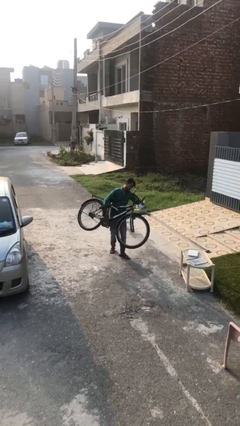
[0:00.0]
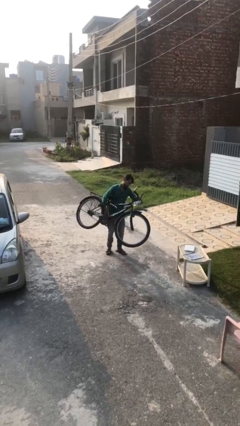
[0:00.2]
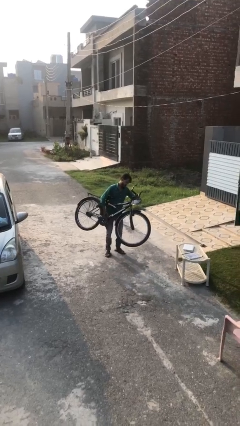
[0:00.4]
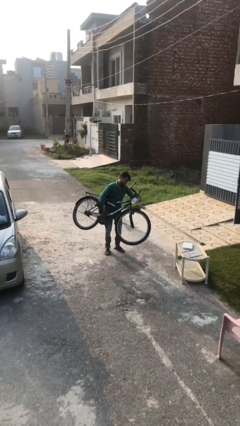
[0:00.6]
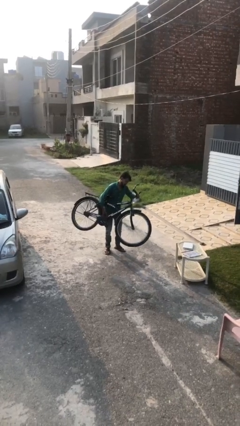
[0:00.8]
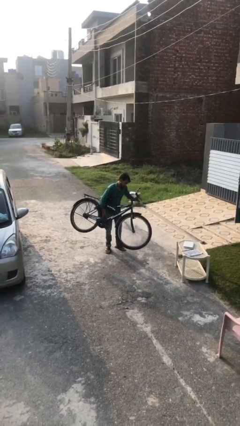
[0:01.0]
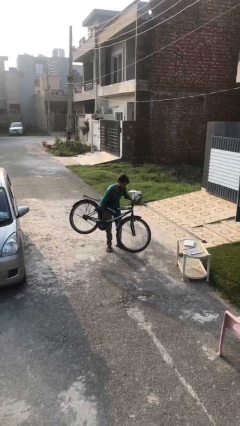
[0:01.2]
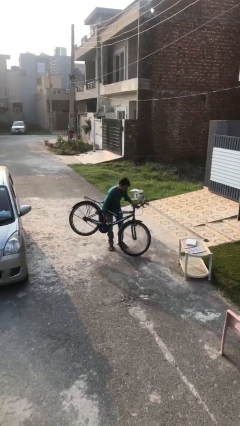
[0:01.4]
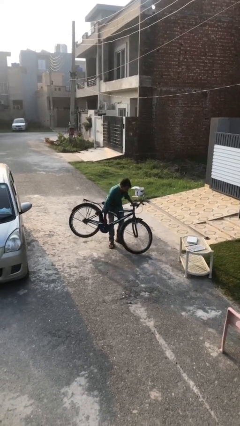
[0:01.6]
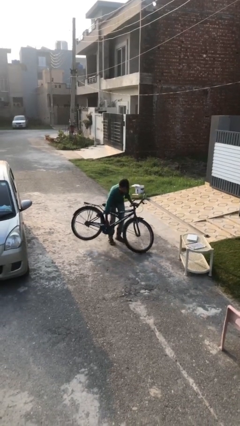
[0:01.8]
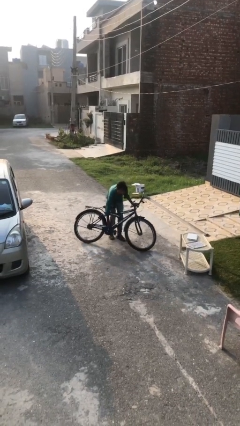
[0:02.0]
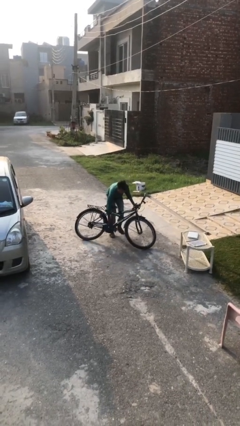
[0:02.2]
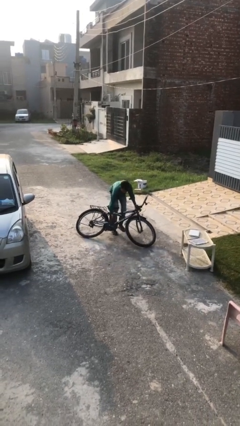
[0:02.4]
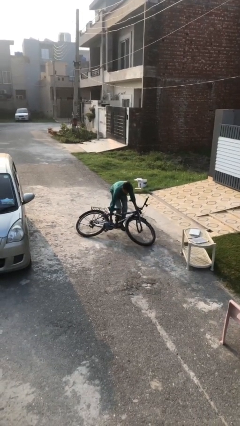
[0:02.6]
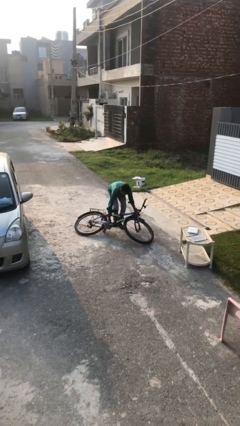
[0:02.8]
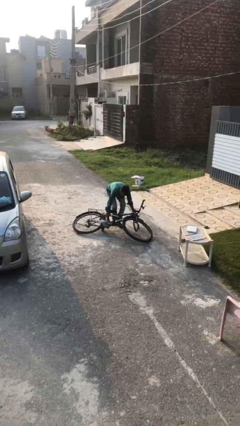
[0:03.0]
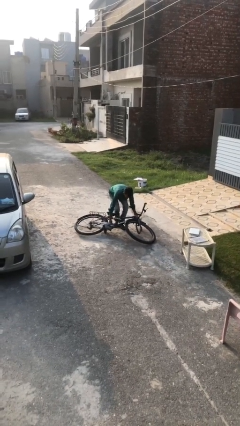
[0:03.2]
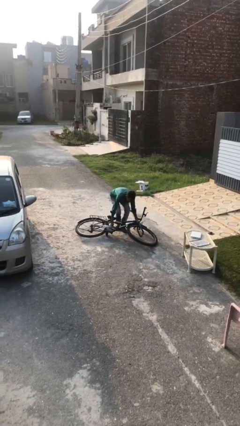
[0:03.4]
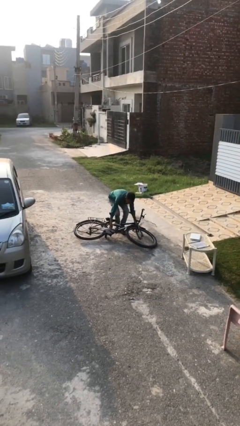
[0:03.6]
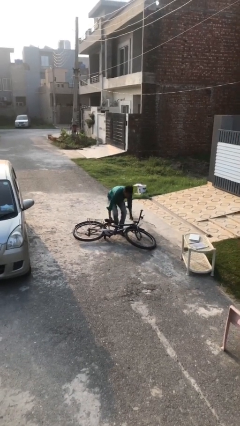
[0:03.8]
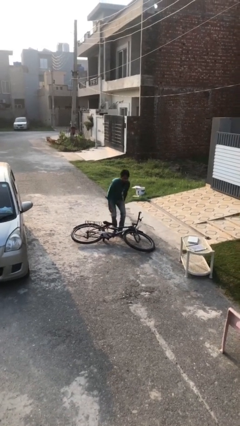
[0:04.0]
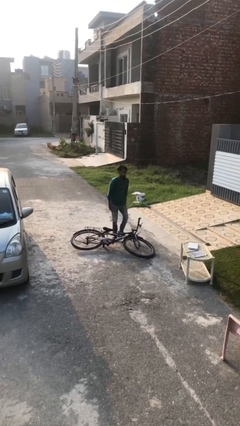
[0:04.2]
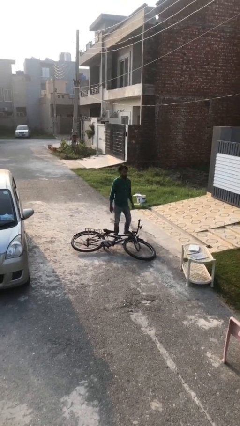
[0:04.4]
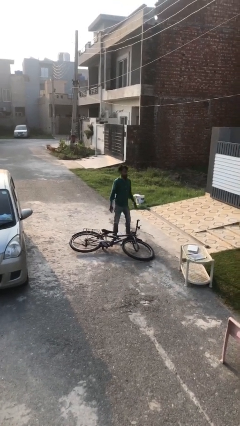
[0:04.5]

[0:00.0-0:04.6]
person puts down object on floor

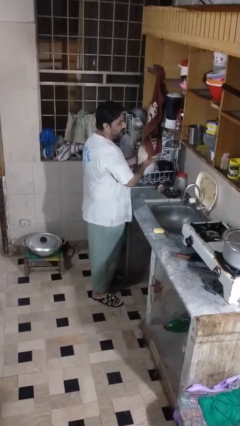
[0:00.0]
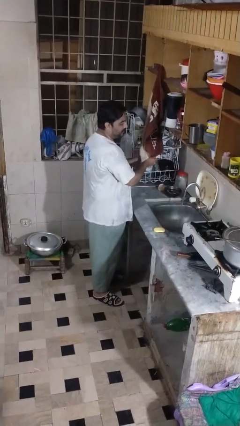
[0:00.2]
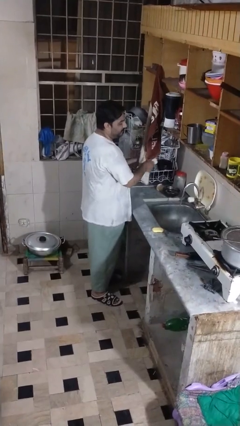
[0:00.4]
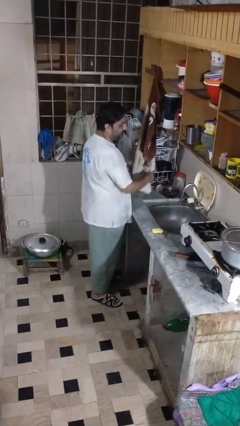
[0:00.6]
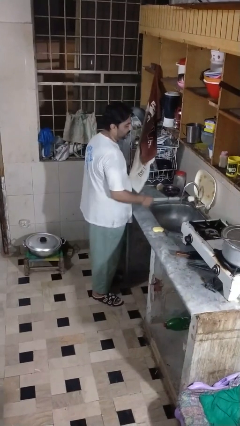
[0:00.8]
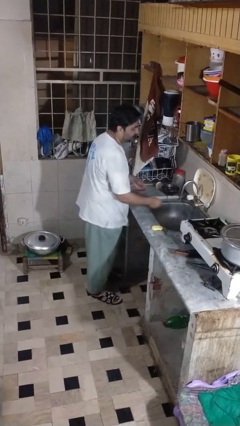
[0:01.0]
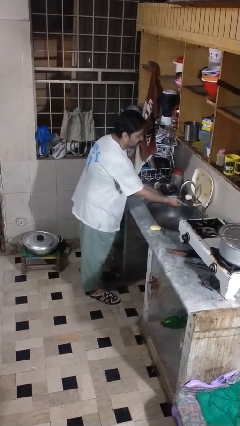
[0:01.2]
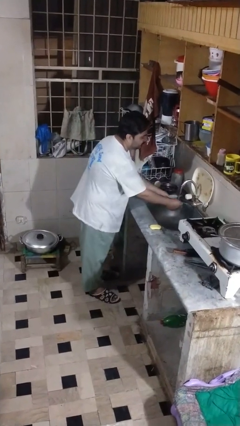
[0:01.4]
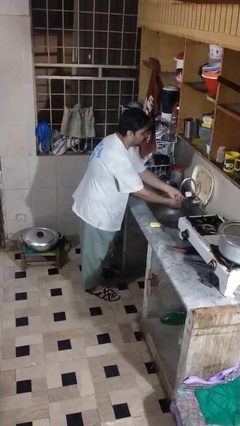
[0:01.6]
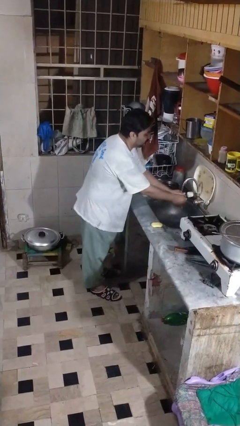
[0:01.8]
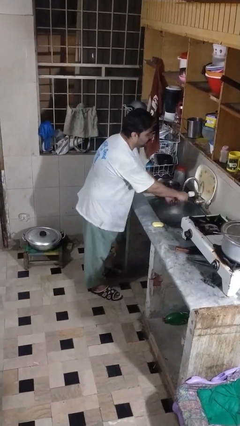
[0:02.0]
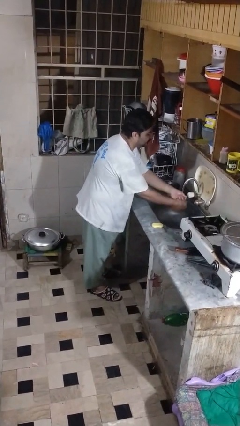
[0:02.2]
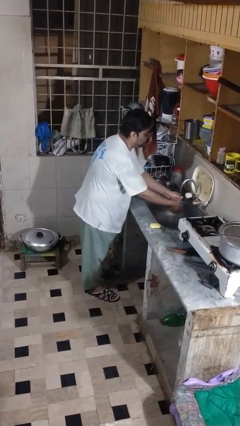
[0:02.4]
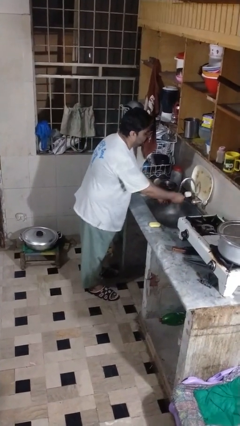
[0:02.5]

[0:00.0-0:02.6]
person washes hands

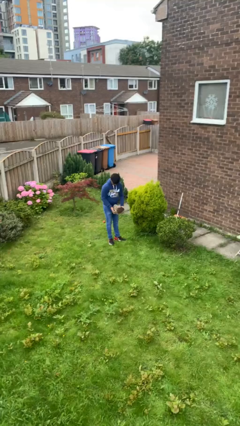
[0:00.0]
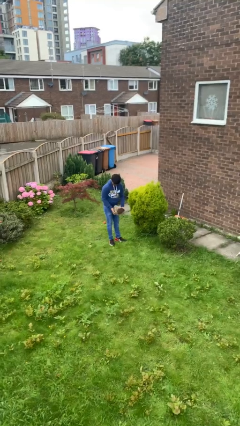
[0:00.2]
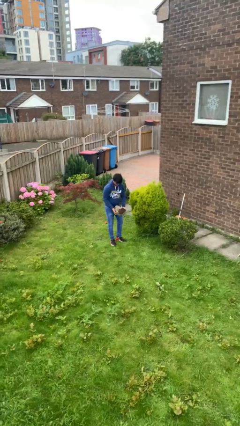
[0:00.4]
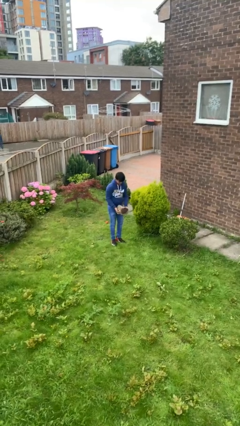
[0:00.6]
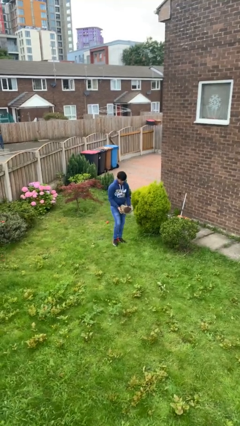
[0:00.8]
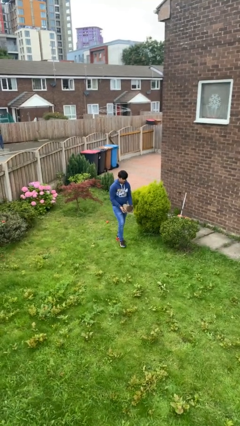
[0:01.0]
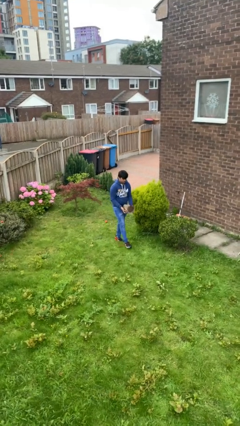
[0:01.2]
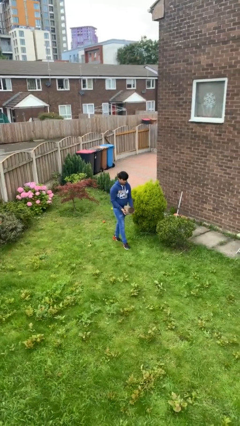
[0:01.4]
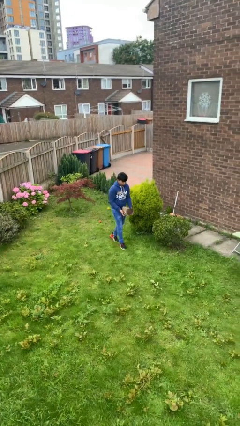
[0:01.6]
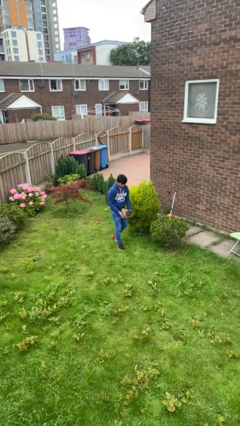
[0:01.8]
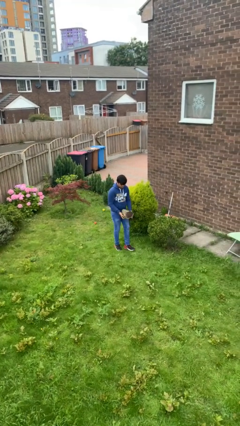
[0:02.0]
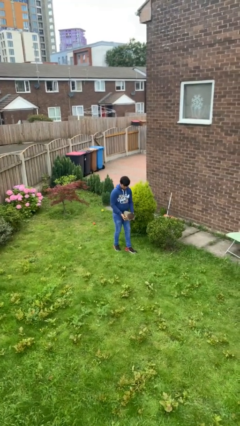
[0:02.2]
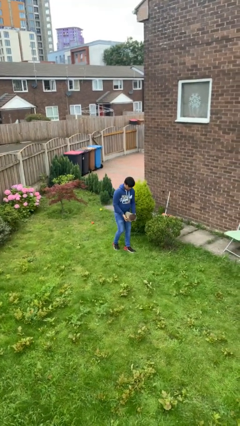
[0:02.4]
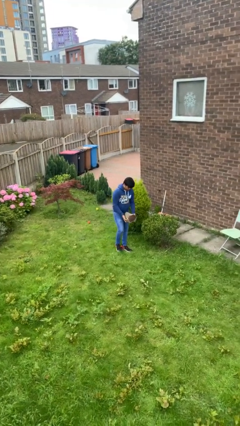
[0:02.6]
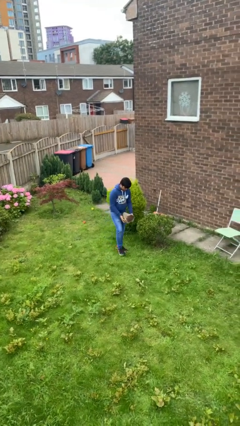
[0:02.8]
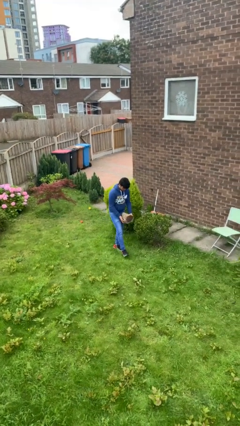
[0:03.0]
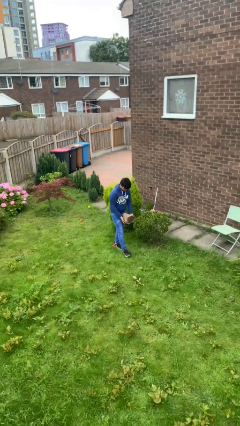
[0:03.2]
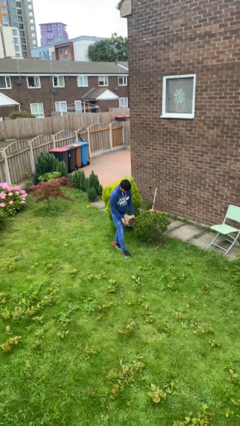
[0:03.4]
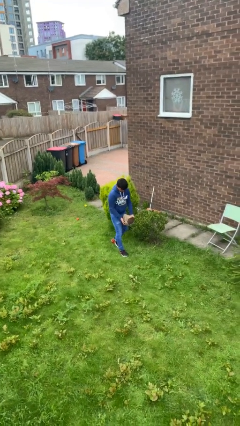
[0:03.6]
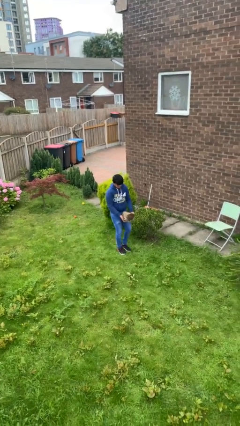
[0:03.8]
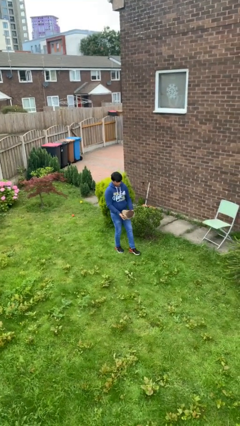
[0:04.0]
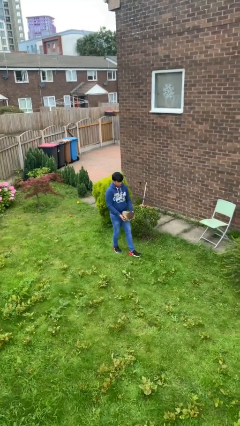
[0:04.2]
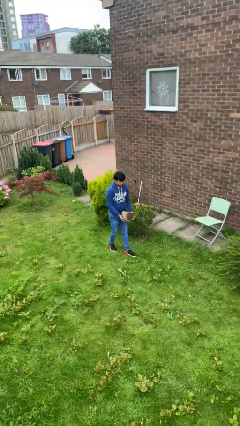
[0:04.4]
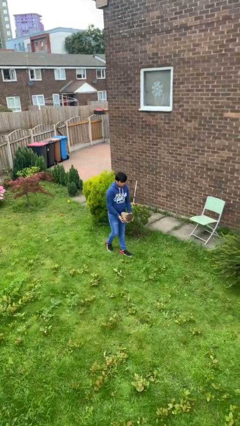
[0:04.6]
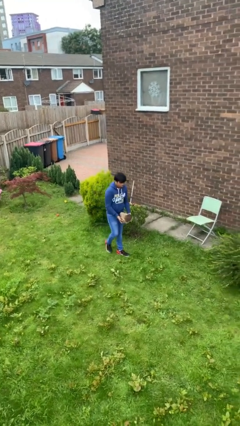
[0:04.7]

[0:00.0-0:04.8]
person carries heavy object

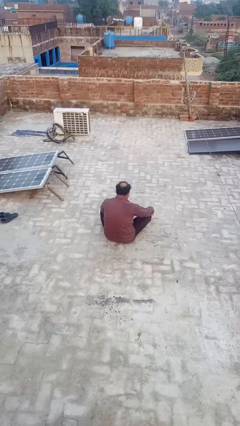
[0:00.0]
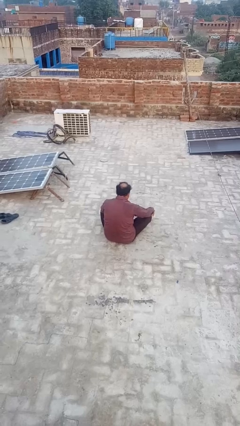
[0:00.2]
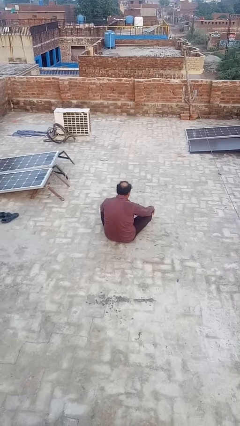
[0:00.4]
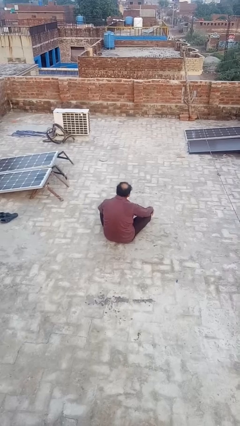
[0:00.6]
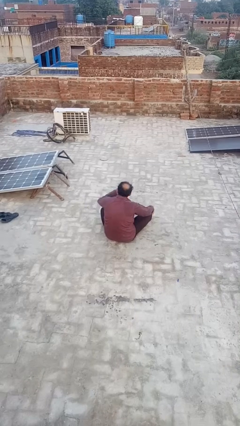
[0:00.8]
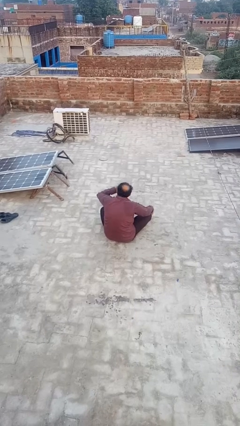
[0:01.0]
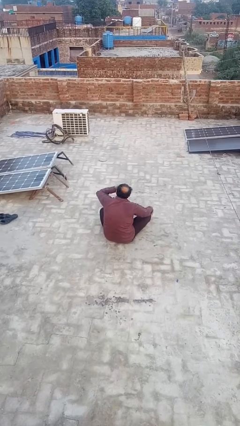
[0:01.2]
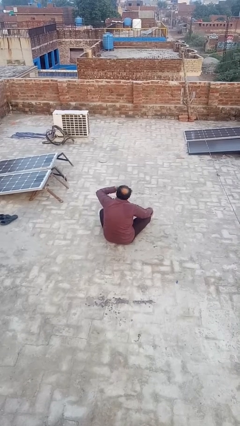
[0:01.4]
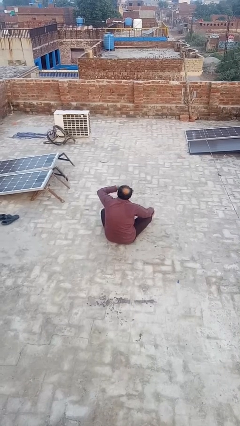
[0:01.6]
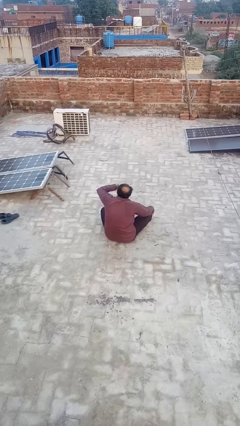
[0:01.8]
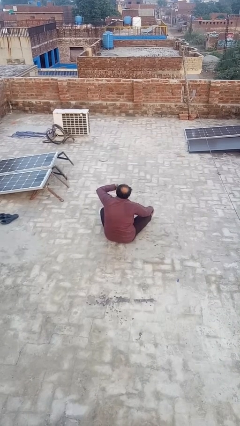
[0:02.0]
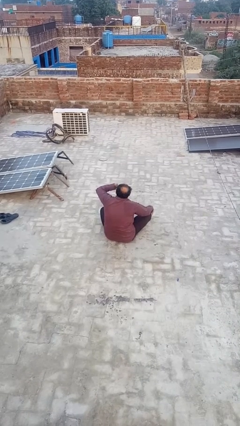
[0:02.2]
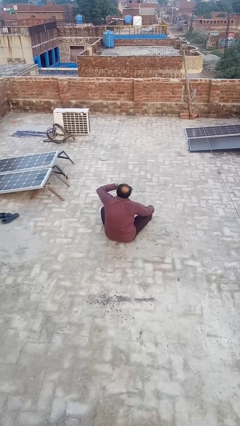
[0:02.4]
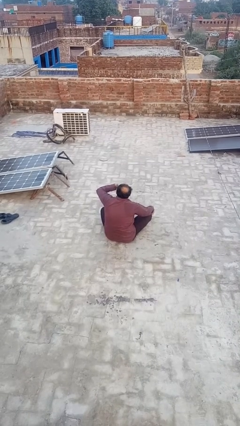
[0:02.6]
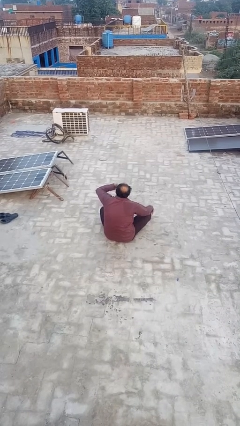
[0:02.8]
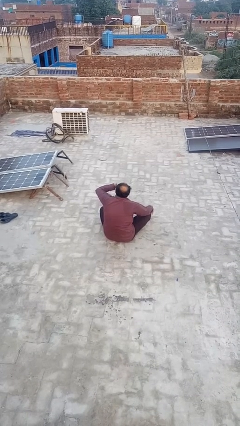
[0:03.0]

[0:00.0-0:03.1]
person yawns

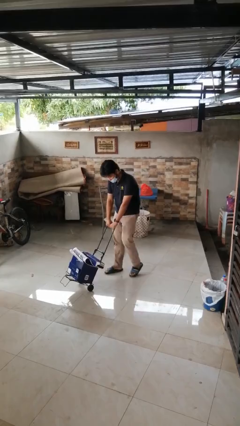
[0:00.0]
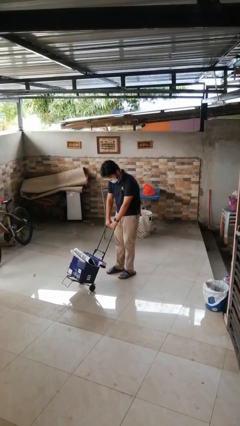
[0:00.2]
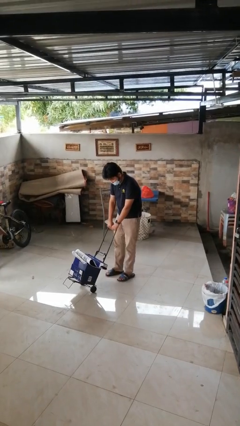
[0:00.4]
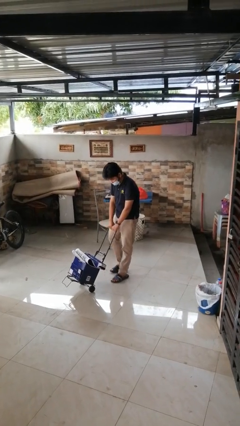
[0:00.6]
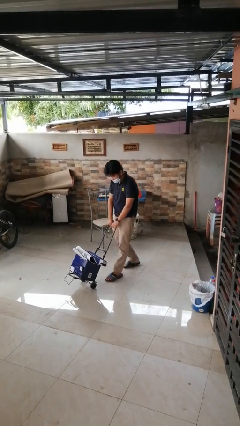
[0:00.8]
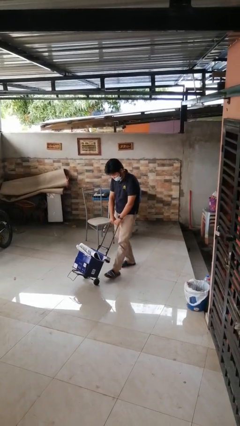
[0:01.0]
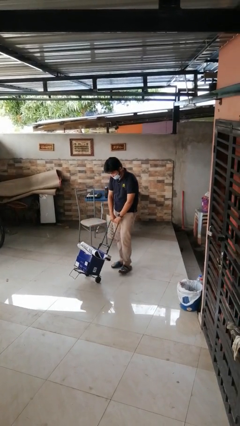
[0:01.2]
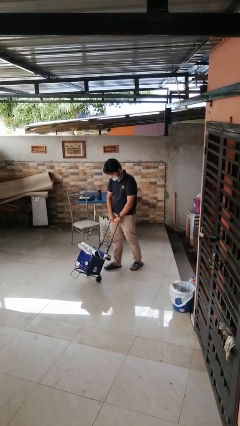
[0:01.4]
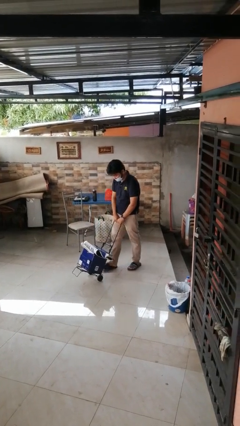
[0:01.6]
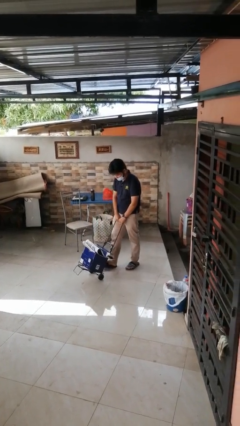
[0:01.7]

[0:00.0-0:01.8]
person pulls wheeled cart

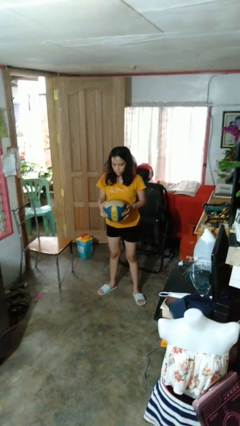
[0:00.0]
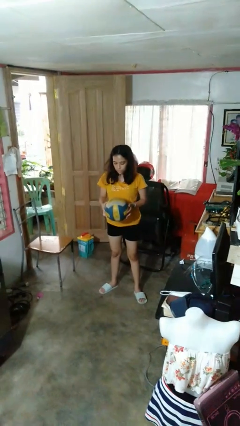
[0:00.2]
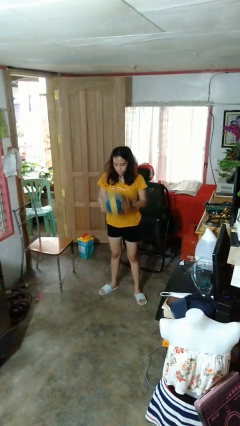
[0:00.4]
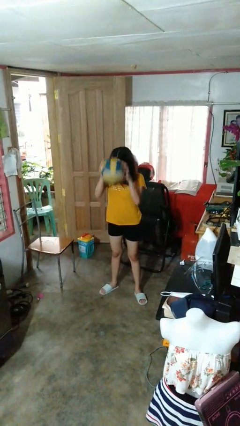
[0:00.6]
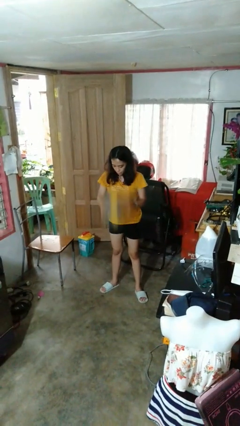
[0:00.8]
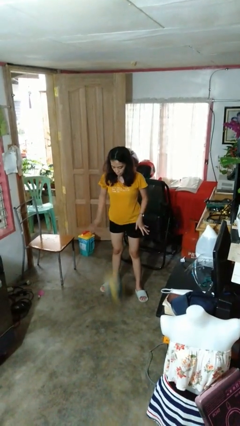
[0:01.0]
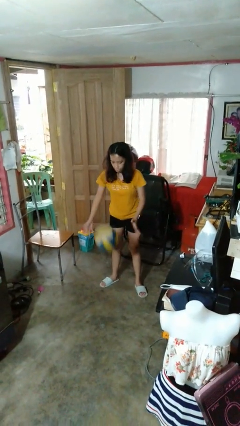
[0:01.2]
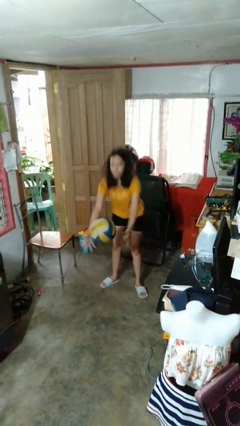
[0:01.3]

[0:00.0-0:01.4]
person bounces ball on floor
